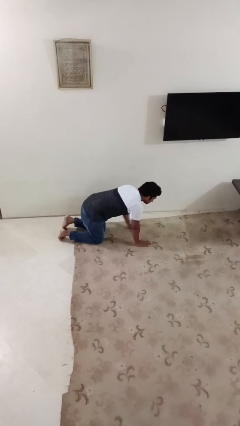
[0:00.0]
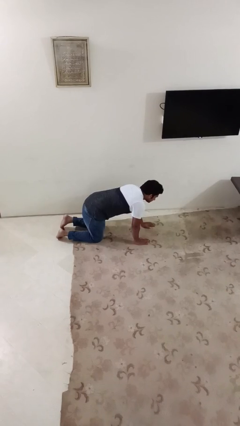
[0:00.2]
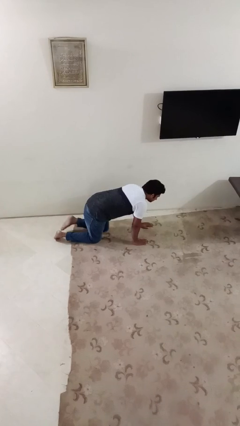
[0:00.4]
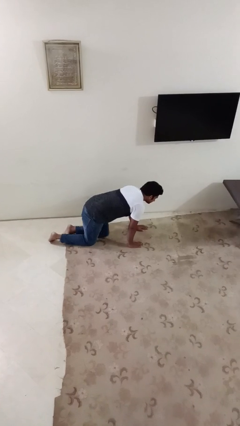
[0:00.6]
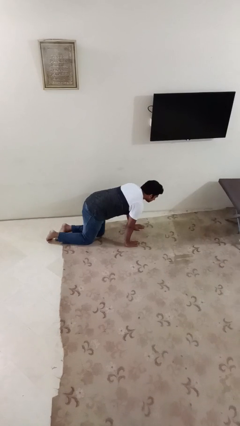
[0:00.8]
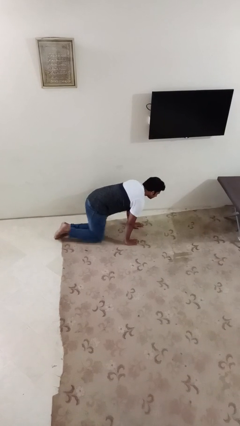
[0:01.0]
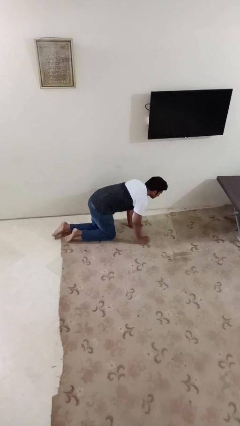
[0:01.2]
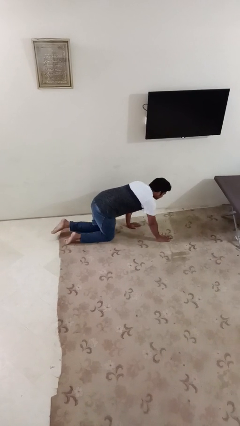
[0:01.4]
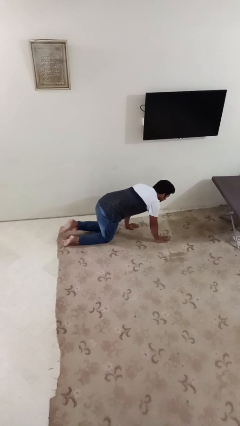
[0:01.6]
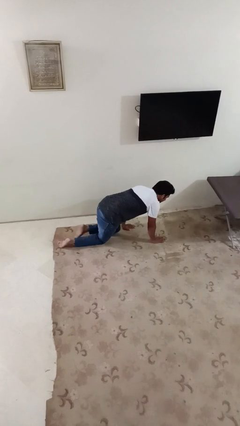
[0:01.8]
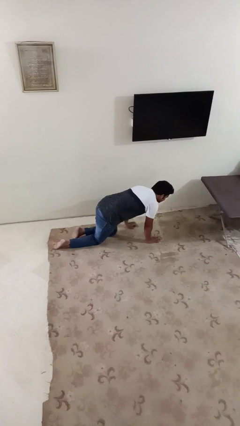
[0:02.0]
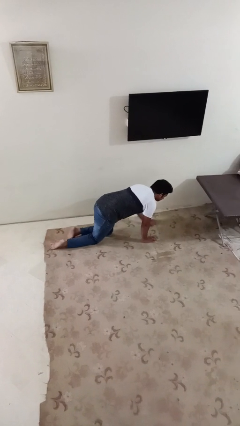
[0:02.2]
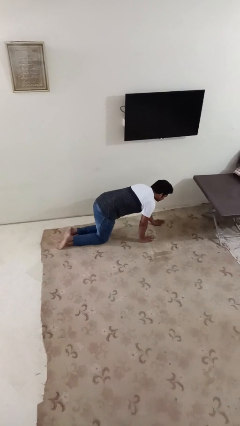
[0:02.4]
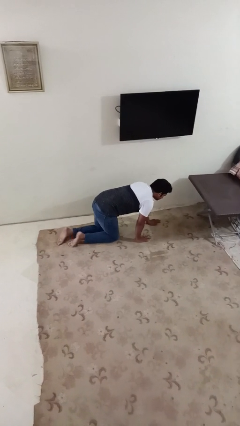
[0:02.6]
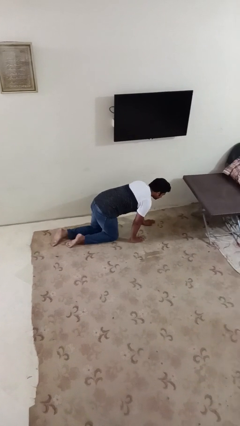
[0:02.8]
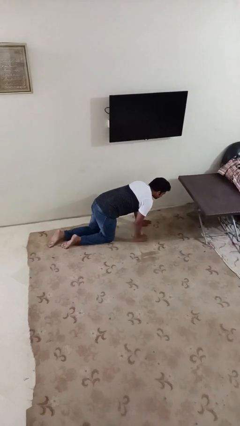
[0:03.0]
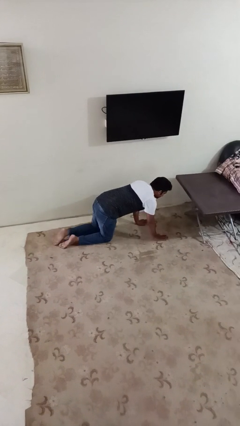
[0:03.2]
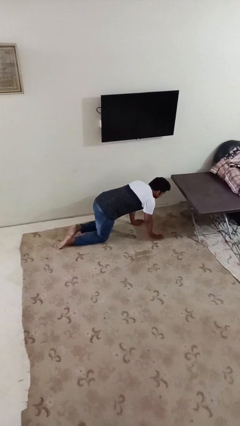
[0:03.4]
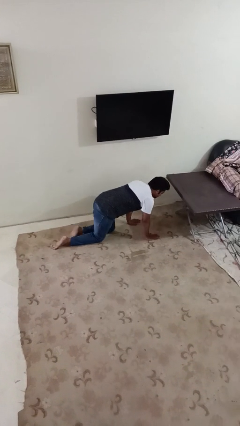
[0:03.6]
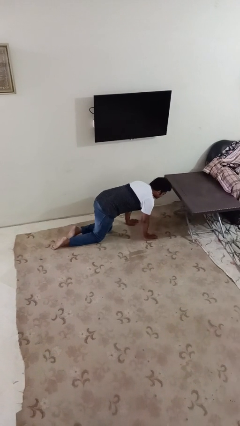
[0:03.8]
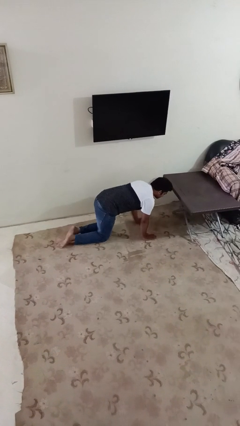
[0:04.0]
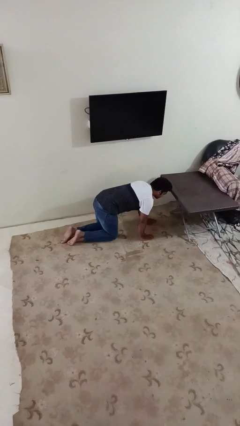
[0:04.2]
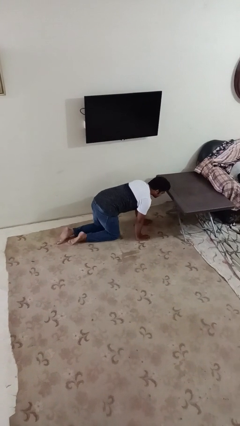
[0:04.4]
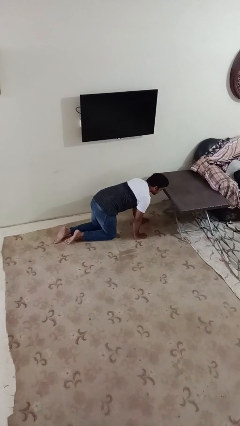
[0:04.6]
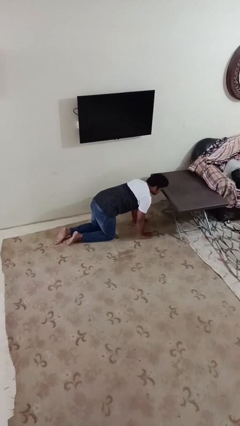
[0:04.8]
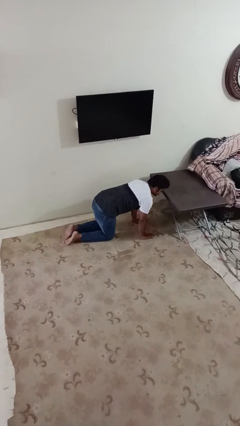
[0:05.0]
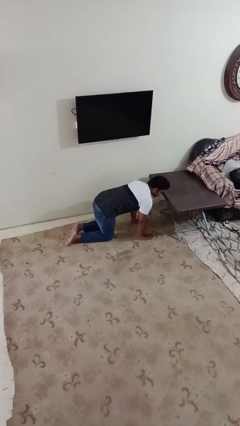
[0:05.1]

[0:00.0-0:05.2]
person crawls

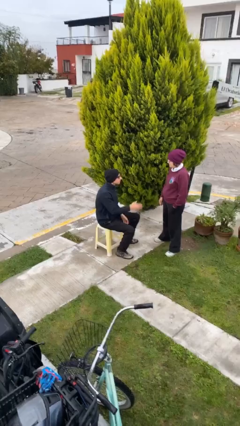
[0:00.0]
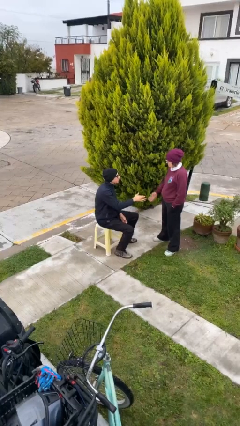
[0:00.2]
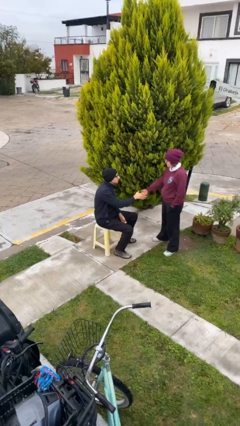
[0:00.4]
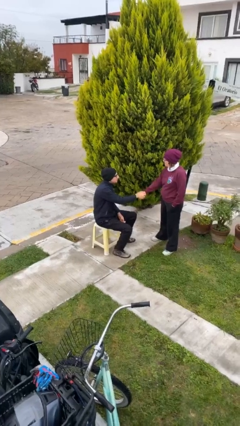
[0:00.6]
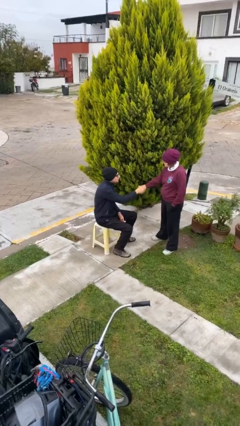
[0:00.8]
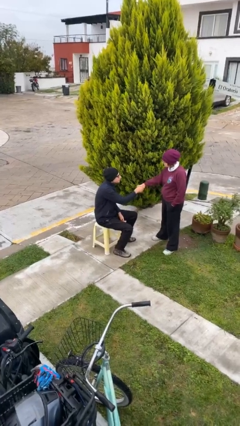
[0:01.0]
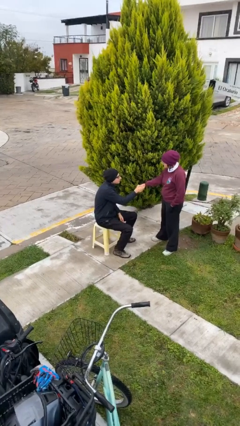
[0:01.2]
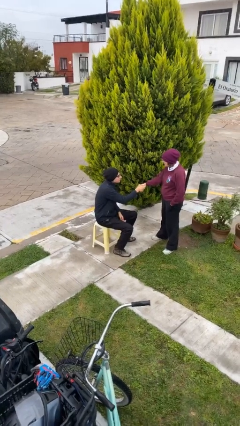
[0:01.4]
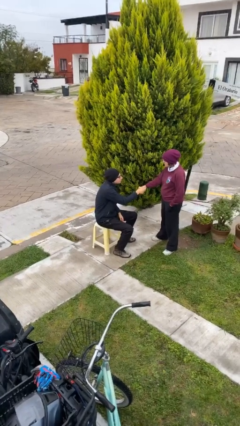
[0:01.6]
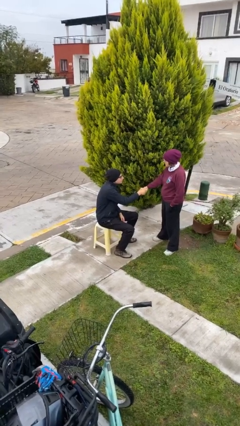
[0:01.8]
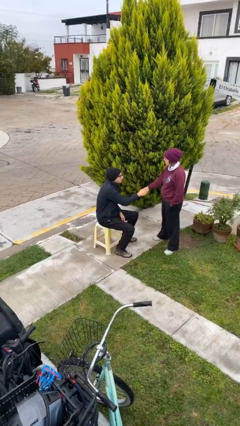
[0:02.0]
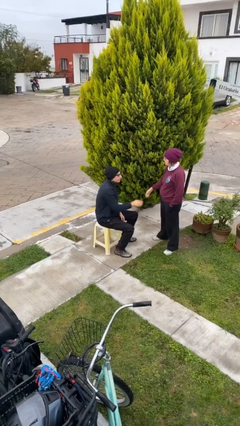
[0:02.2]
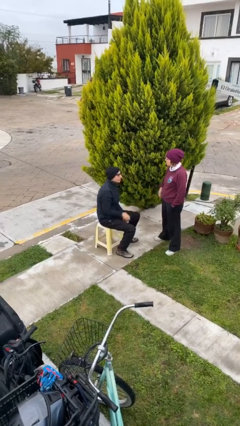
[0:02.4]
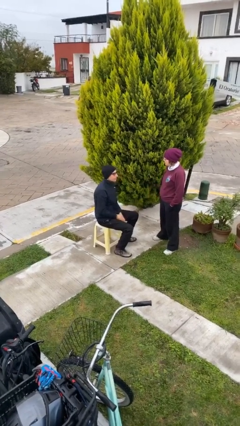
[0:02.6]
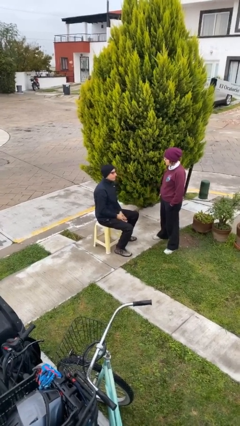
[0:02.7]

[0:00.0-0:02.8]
person shakes hand

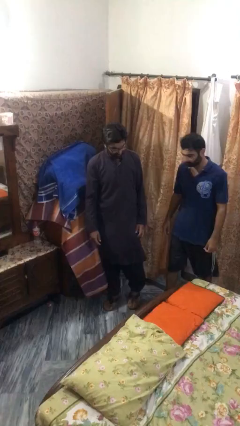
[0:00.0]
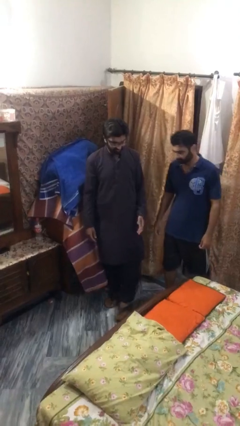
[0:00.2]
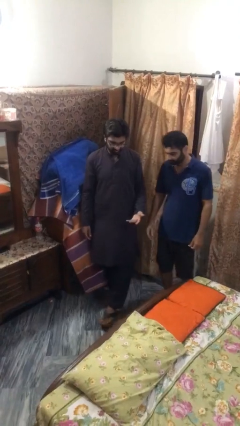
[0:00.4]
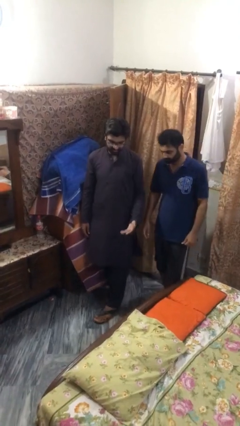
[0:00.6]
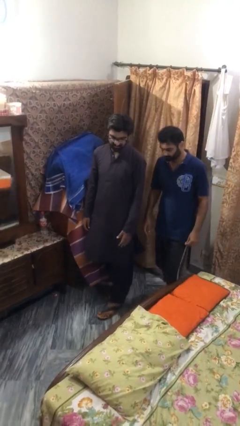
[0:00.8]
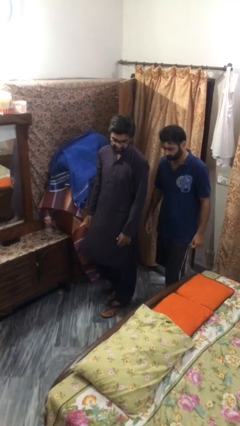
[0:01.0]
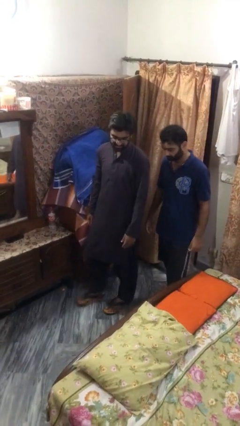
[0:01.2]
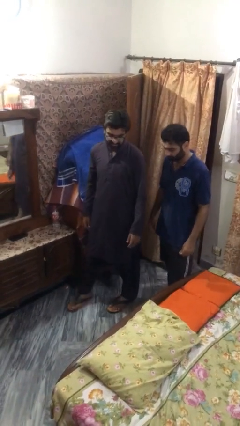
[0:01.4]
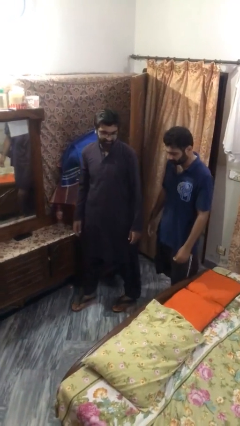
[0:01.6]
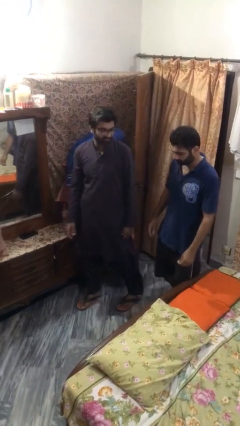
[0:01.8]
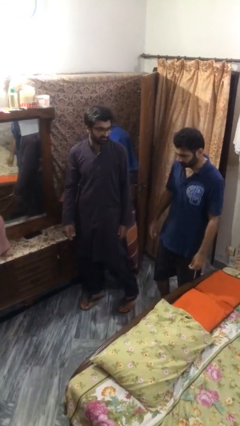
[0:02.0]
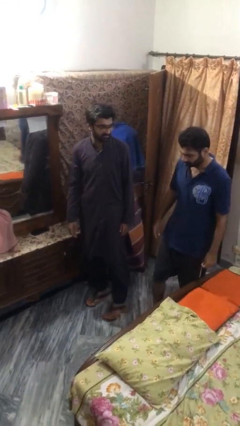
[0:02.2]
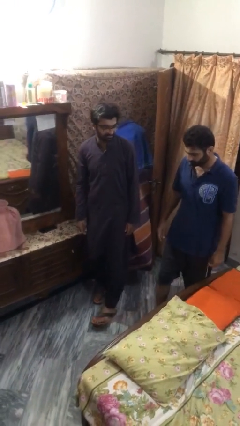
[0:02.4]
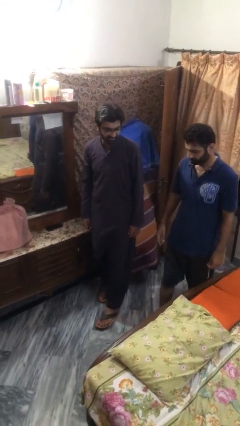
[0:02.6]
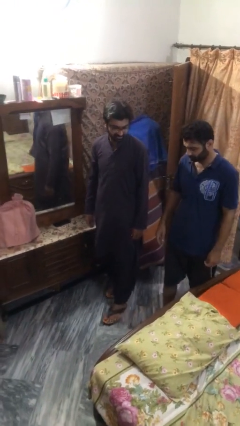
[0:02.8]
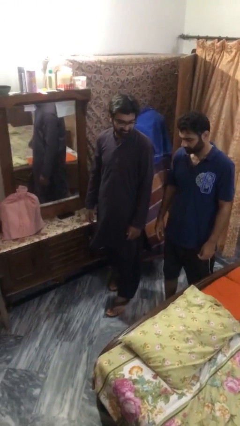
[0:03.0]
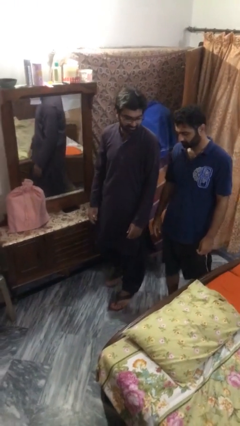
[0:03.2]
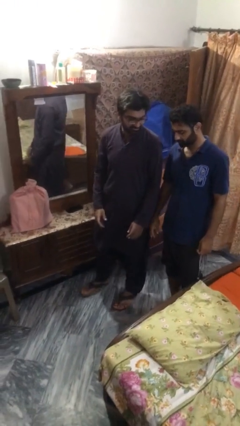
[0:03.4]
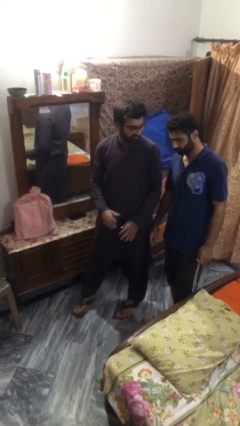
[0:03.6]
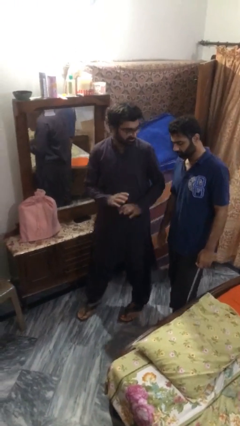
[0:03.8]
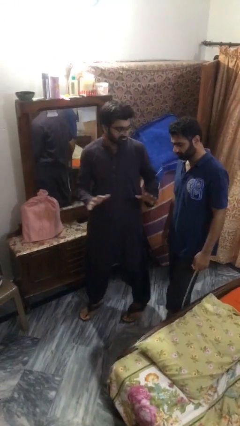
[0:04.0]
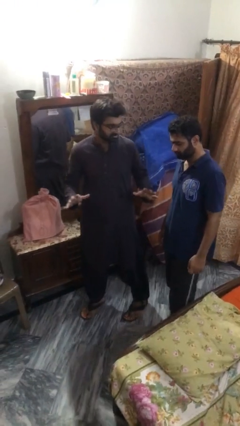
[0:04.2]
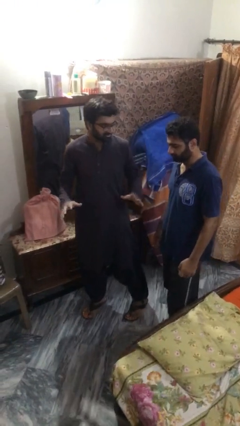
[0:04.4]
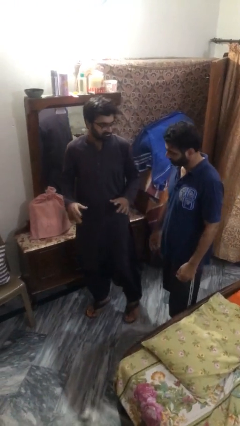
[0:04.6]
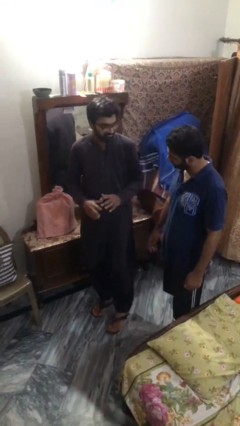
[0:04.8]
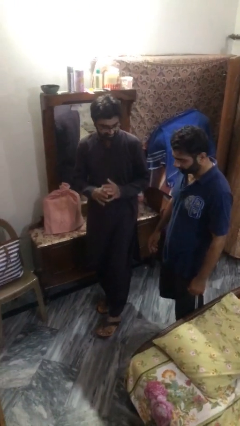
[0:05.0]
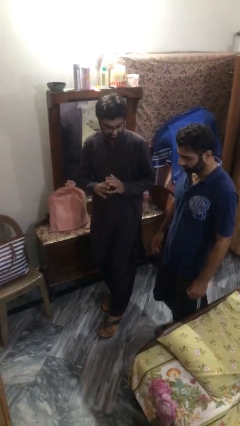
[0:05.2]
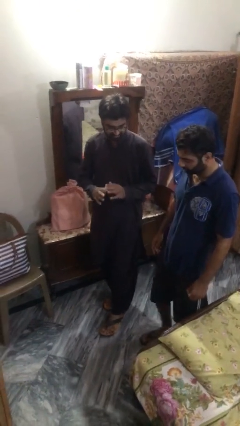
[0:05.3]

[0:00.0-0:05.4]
person talks to person

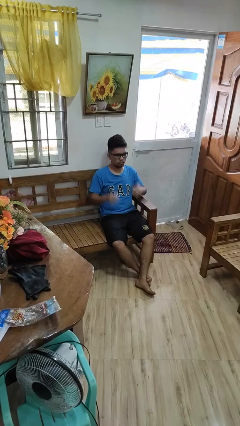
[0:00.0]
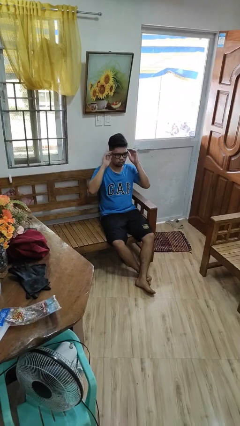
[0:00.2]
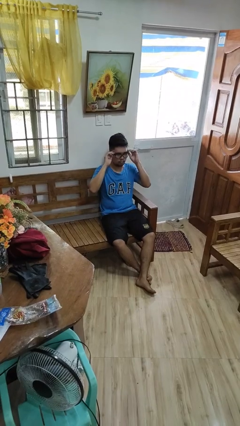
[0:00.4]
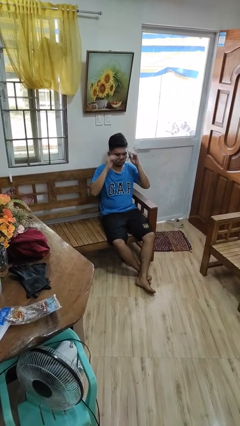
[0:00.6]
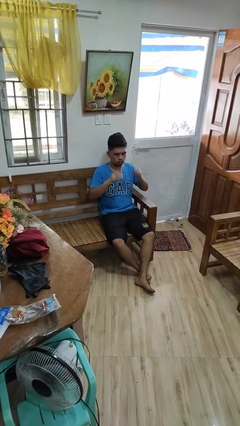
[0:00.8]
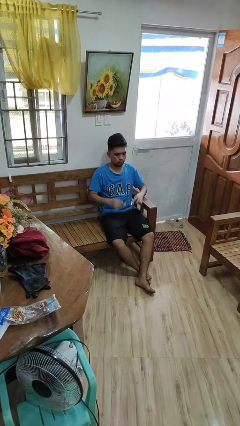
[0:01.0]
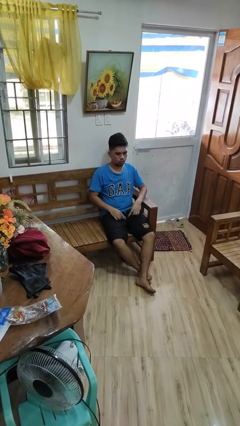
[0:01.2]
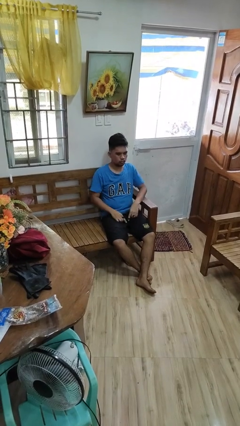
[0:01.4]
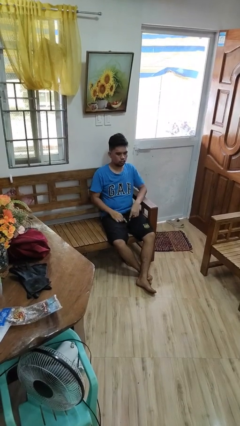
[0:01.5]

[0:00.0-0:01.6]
person takes off glasses

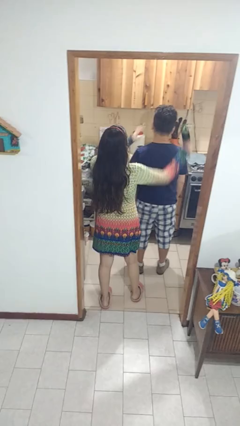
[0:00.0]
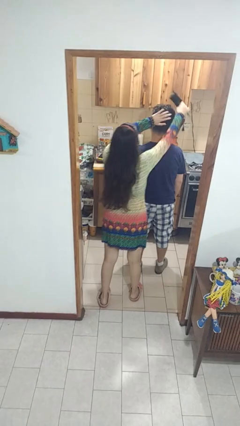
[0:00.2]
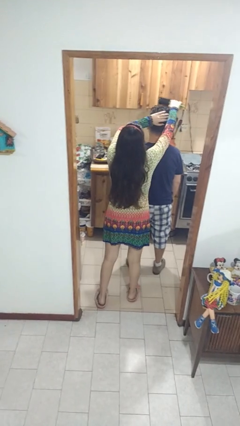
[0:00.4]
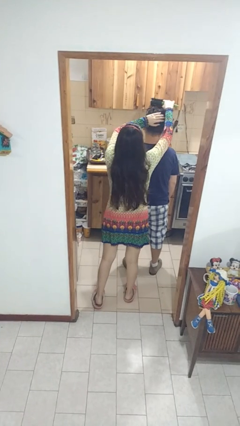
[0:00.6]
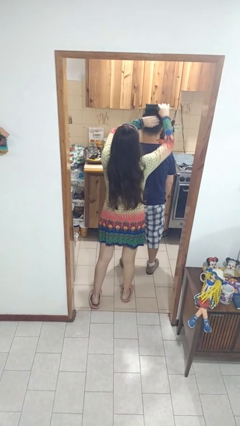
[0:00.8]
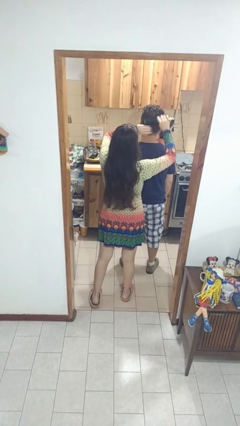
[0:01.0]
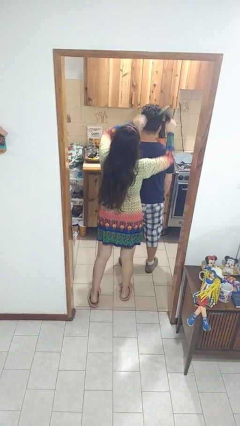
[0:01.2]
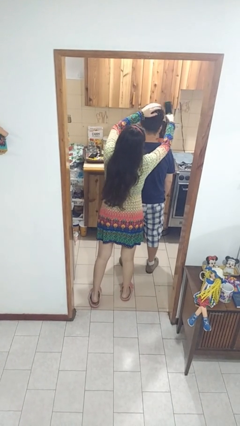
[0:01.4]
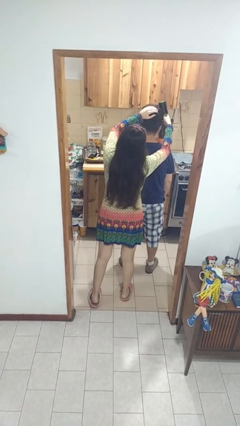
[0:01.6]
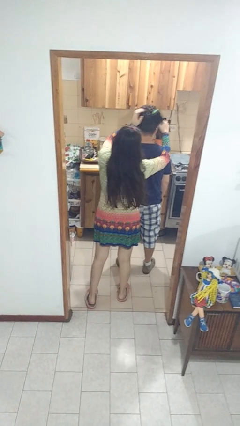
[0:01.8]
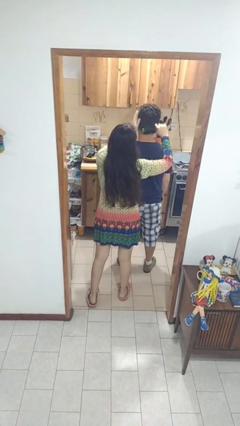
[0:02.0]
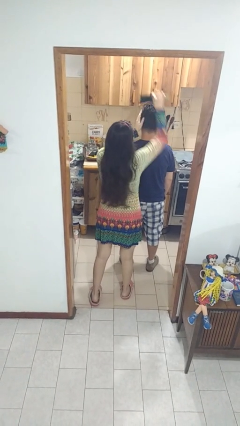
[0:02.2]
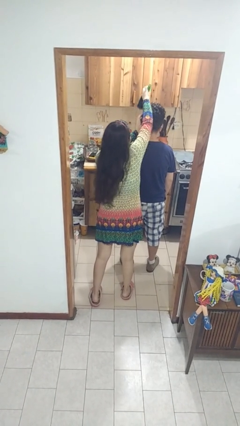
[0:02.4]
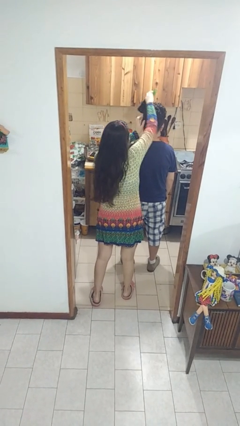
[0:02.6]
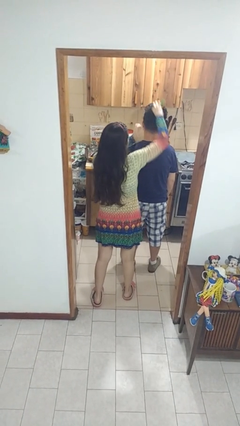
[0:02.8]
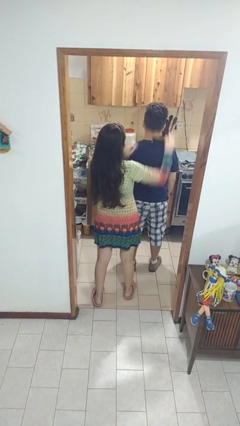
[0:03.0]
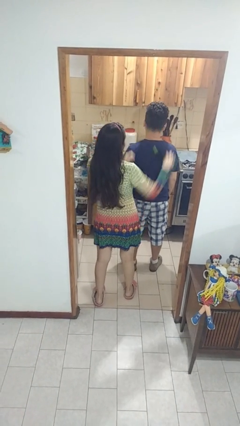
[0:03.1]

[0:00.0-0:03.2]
person brushes hair of person
